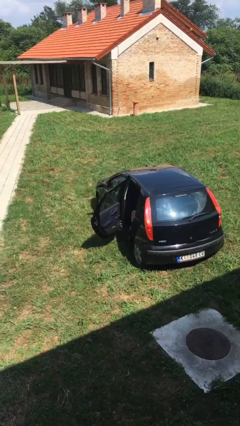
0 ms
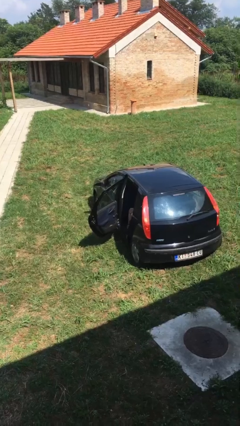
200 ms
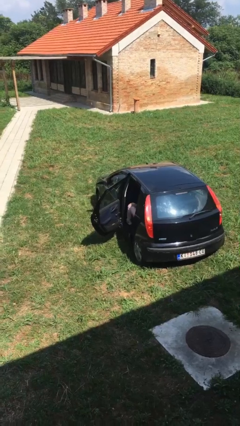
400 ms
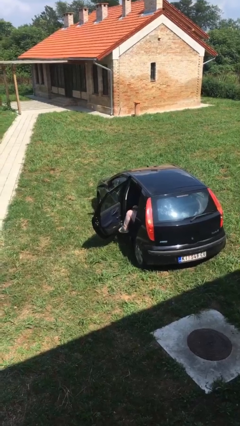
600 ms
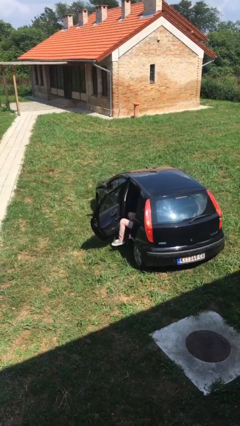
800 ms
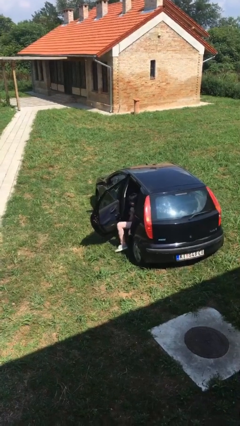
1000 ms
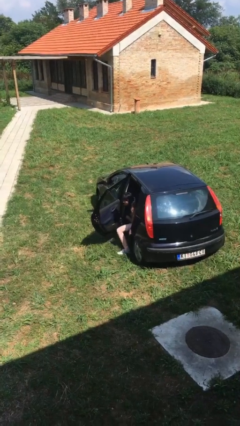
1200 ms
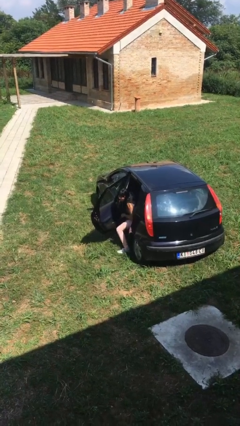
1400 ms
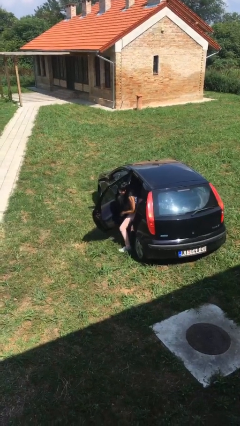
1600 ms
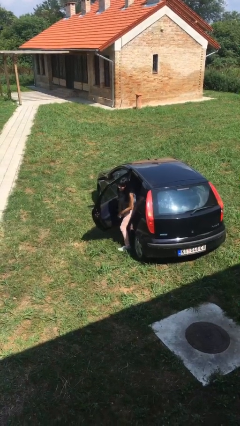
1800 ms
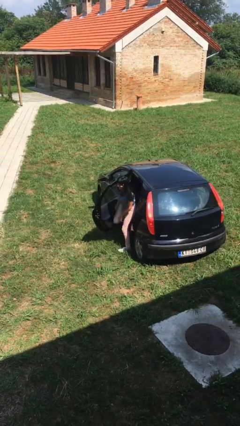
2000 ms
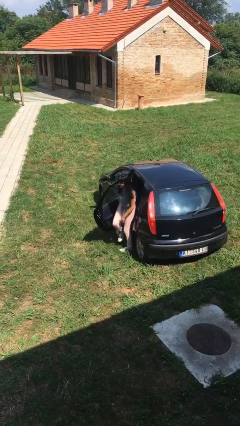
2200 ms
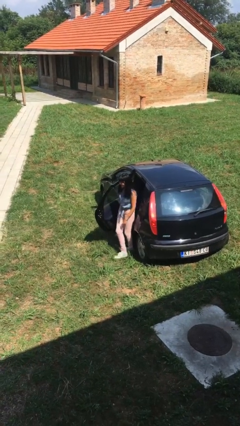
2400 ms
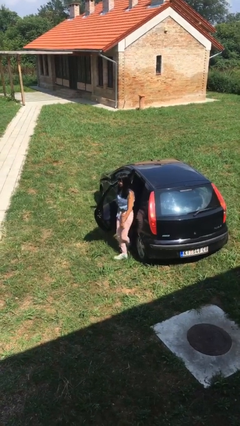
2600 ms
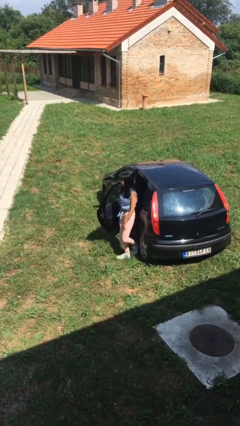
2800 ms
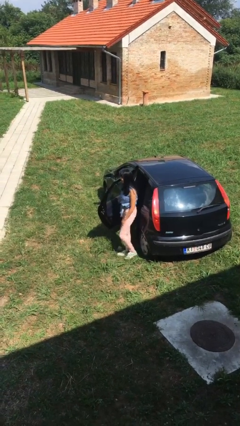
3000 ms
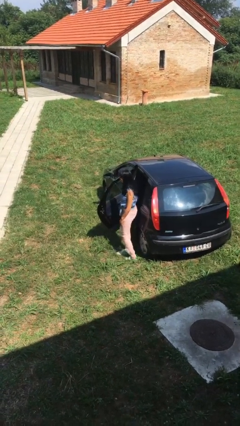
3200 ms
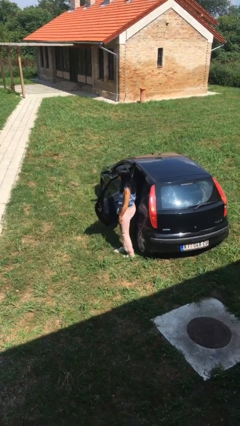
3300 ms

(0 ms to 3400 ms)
person exits car

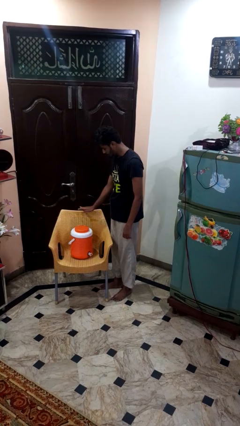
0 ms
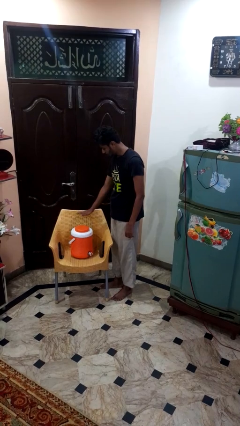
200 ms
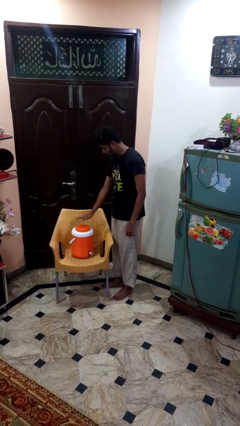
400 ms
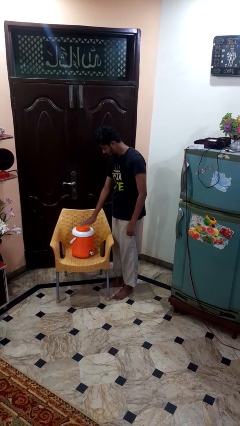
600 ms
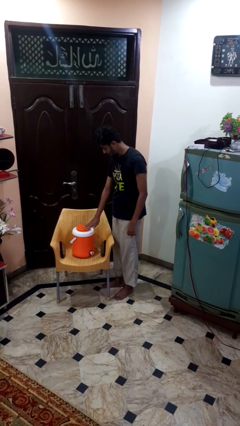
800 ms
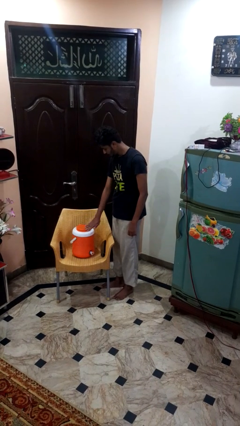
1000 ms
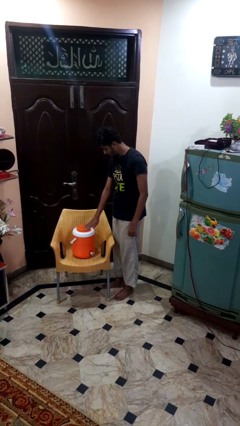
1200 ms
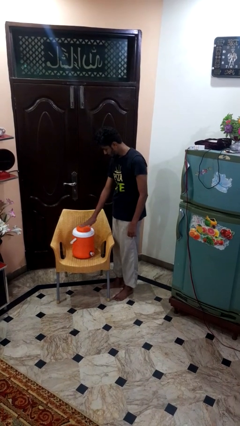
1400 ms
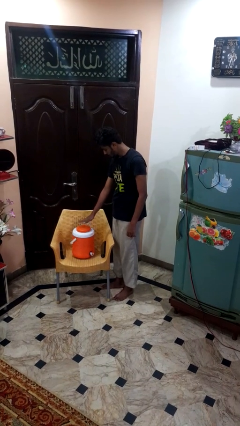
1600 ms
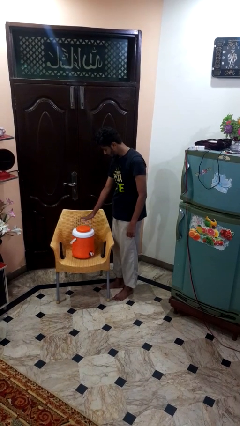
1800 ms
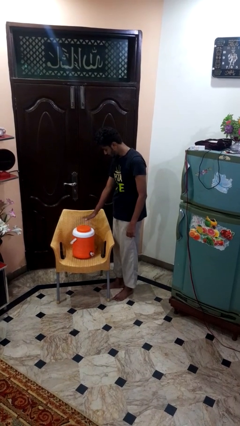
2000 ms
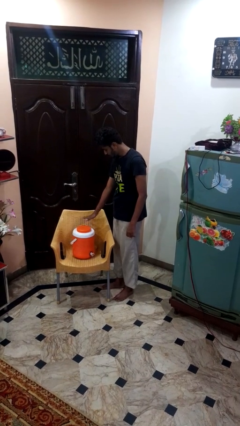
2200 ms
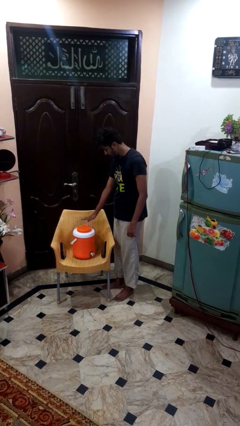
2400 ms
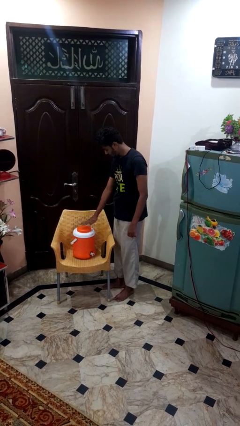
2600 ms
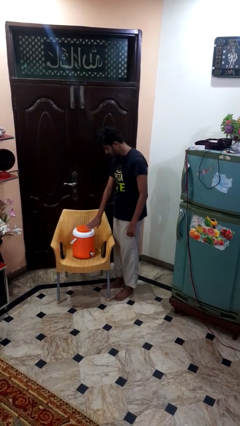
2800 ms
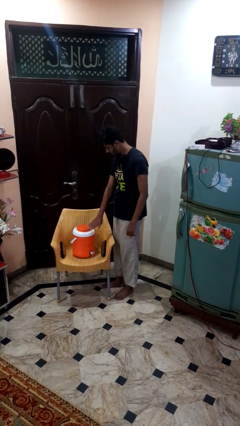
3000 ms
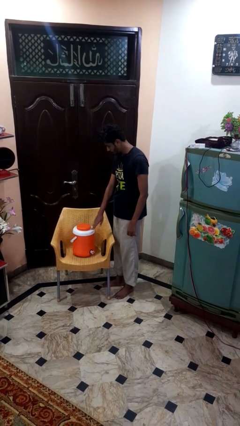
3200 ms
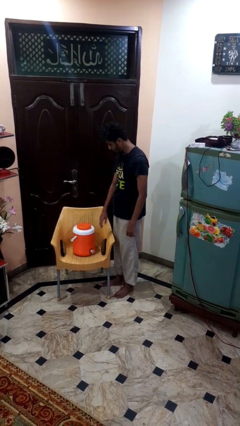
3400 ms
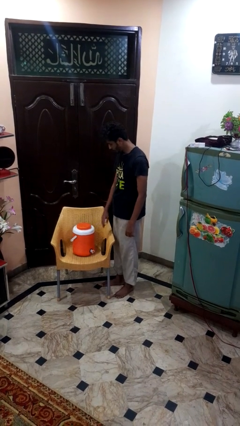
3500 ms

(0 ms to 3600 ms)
person waves hand over object

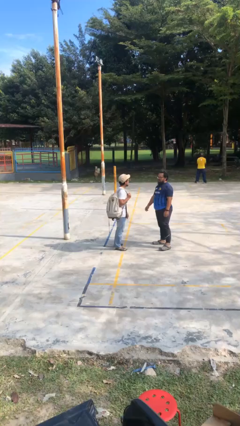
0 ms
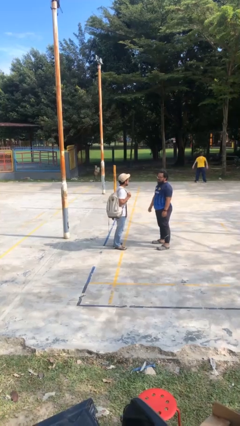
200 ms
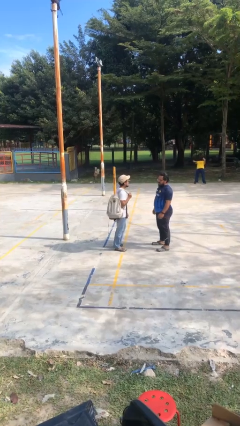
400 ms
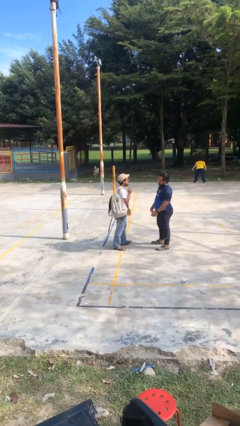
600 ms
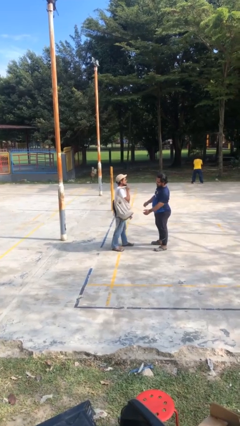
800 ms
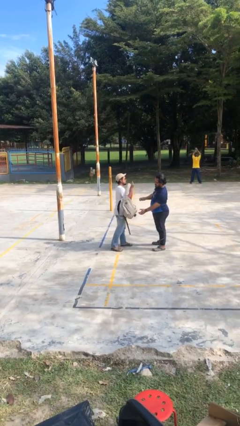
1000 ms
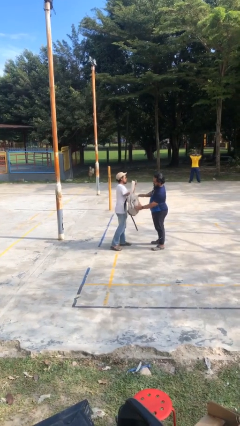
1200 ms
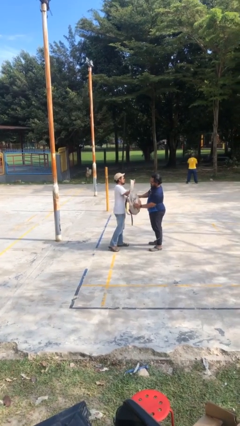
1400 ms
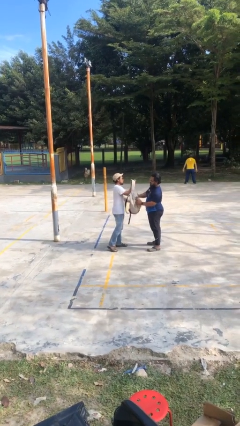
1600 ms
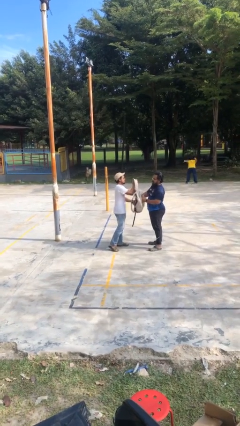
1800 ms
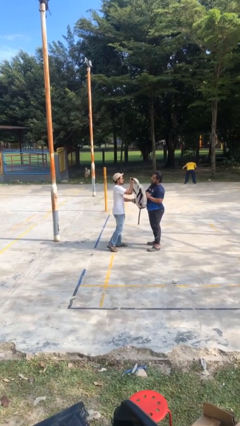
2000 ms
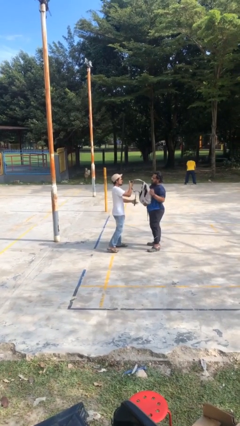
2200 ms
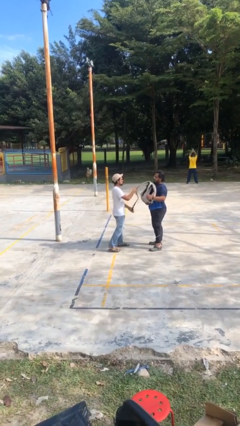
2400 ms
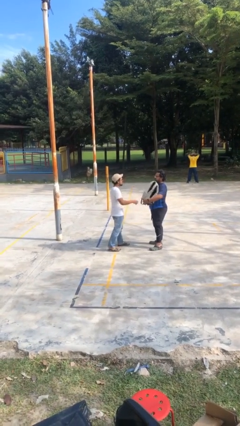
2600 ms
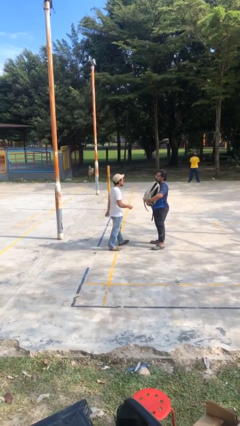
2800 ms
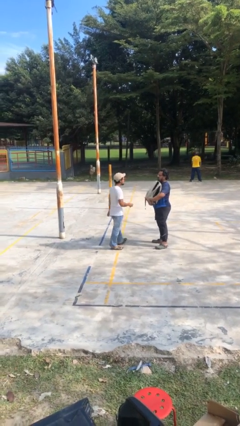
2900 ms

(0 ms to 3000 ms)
person transfers object to person

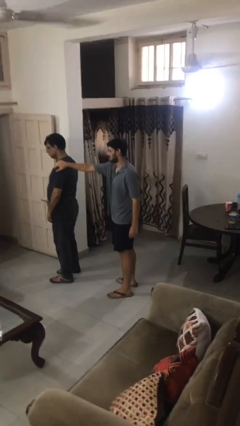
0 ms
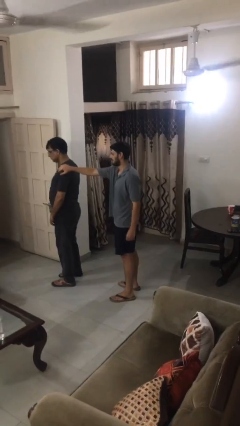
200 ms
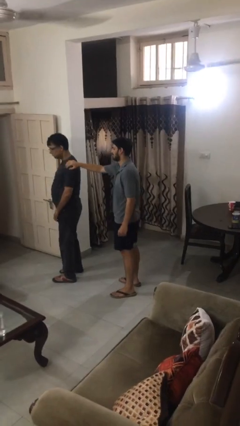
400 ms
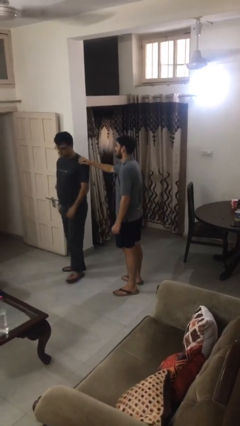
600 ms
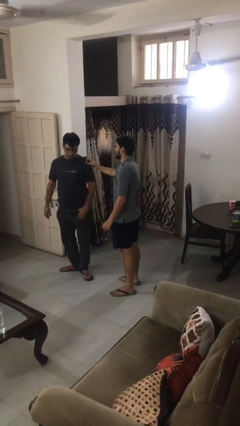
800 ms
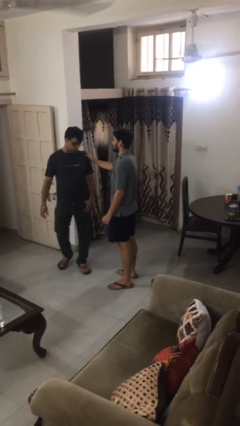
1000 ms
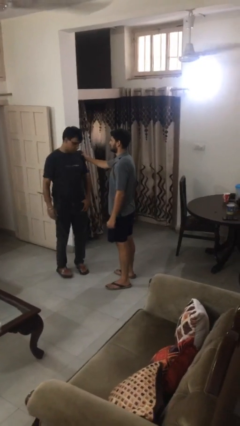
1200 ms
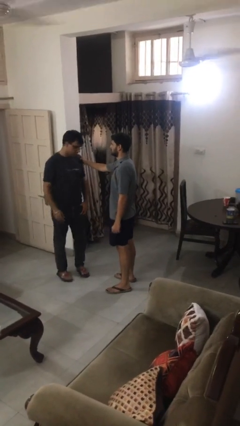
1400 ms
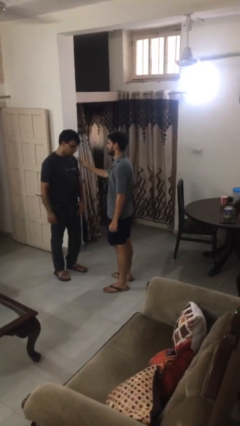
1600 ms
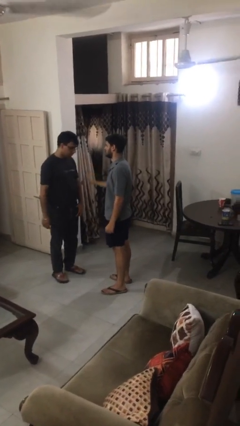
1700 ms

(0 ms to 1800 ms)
person spins person around

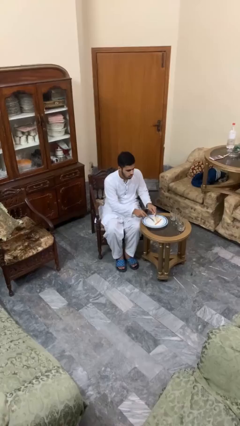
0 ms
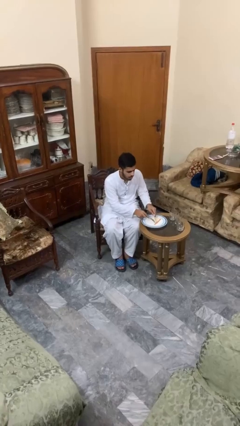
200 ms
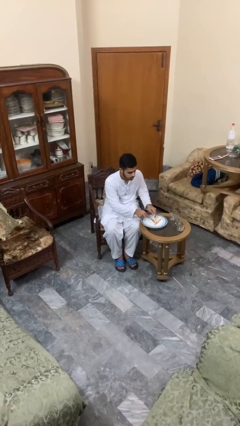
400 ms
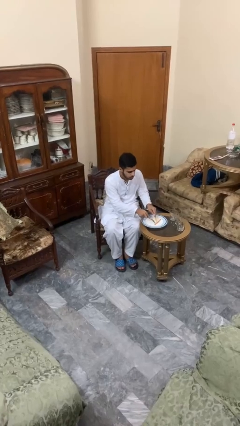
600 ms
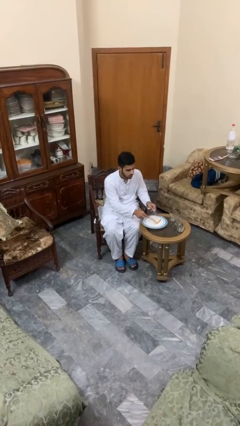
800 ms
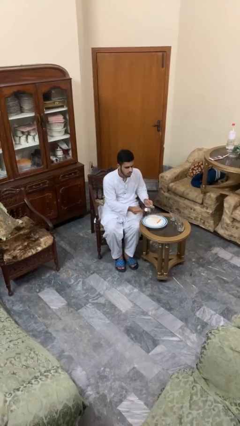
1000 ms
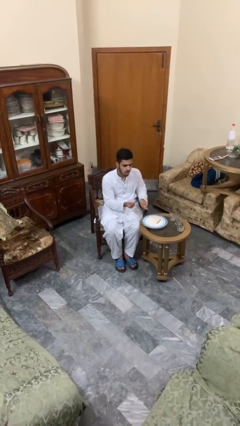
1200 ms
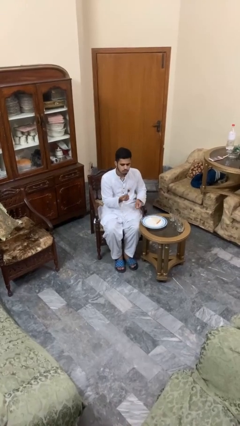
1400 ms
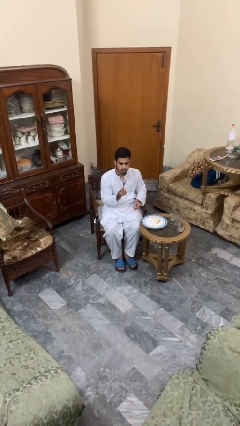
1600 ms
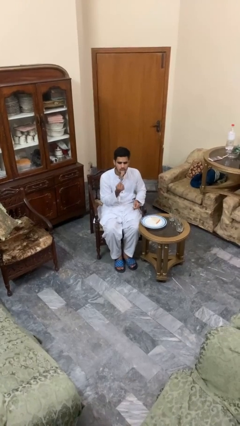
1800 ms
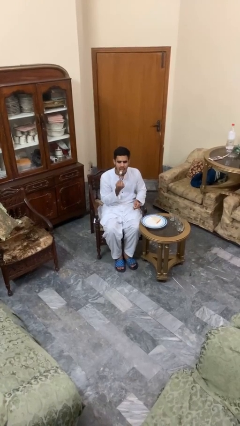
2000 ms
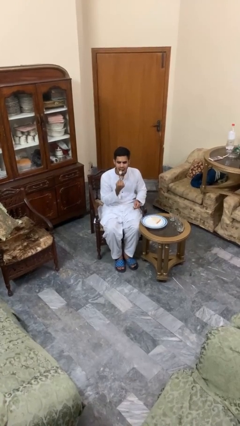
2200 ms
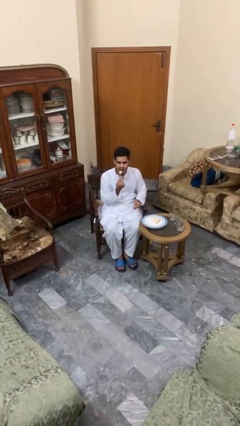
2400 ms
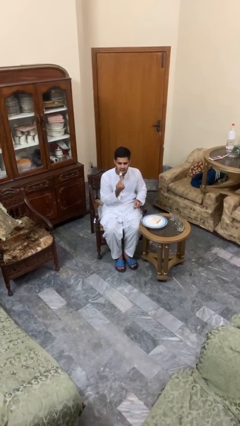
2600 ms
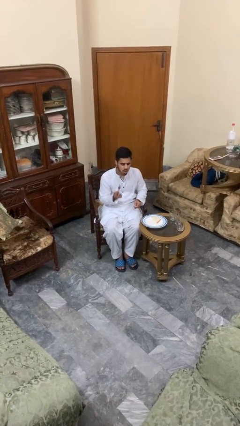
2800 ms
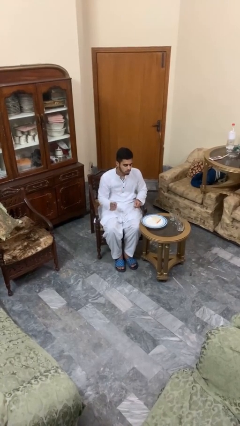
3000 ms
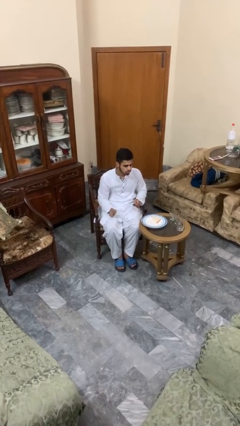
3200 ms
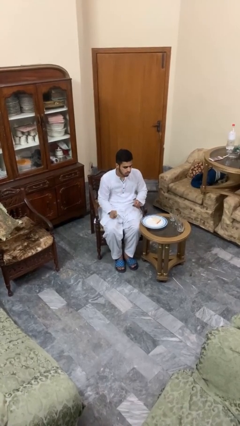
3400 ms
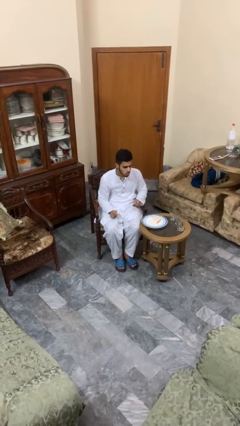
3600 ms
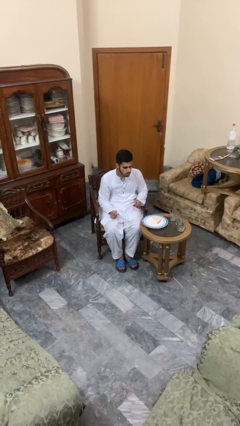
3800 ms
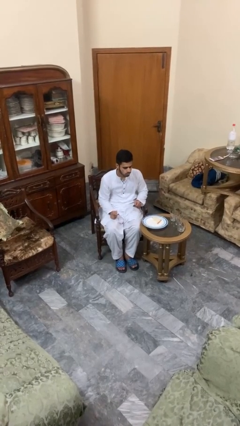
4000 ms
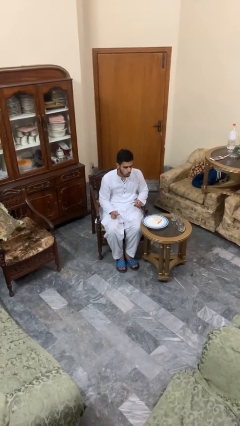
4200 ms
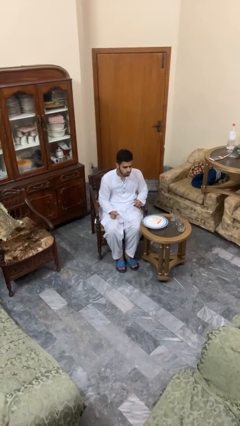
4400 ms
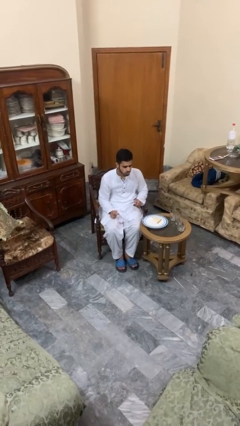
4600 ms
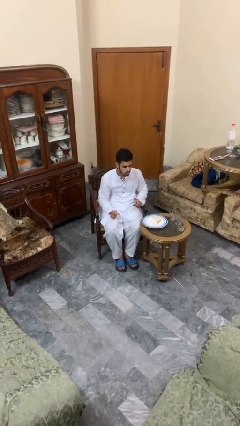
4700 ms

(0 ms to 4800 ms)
person eats with utensil

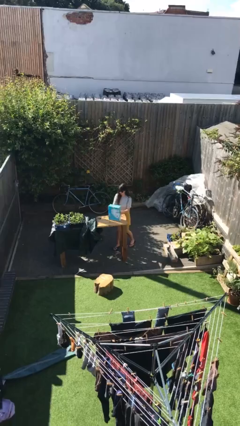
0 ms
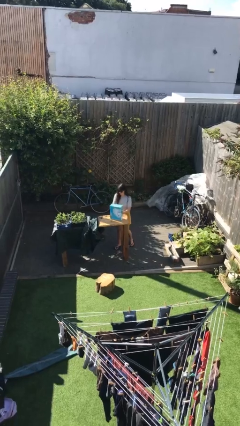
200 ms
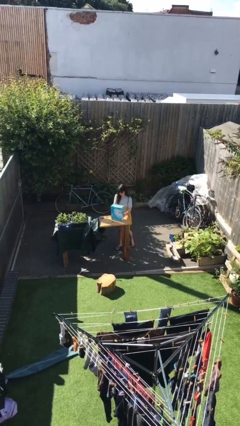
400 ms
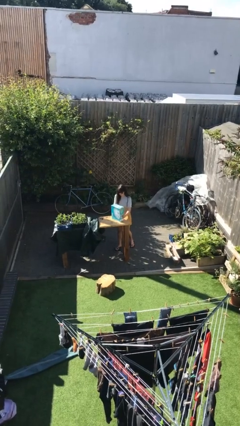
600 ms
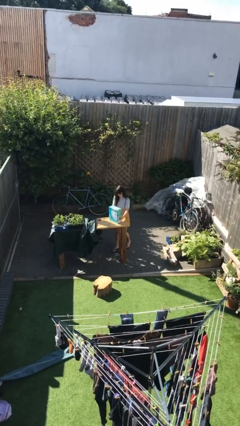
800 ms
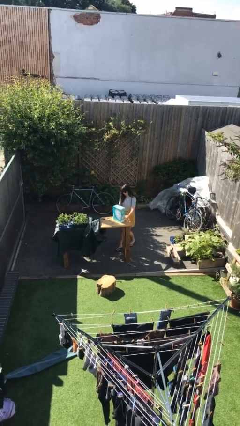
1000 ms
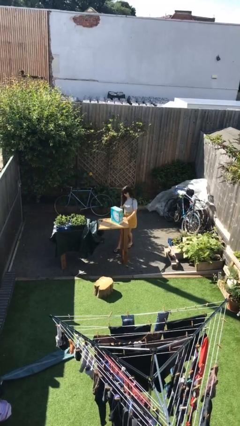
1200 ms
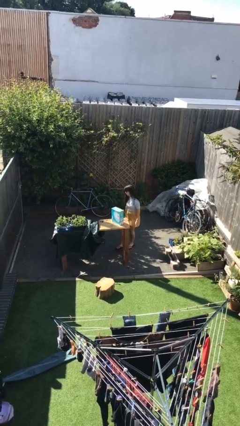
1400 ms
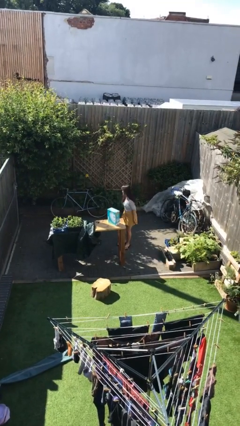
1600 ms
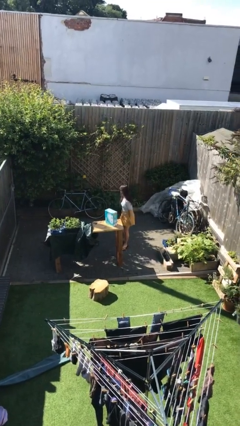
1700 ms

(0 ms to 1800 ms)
person puts down object on table
